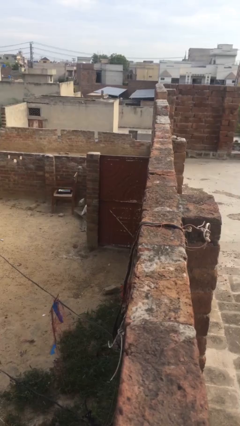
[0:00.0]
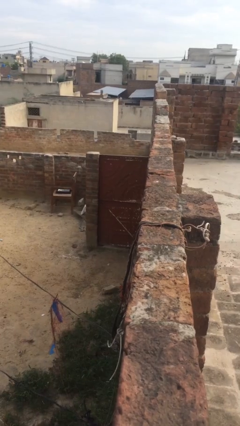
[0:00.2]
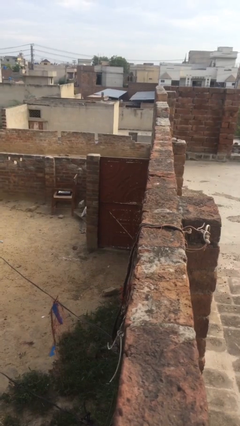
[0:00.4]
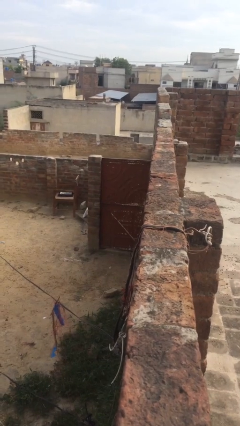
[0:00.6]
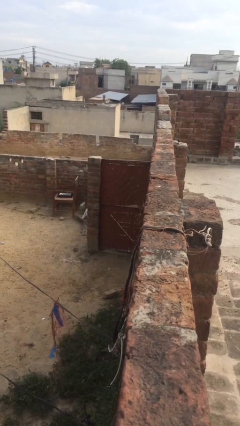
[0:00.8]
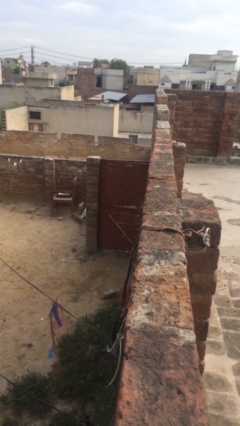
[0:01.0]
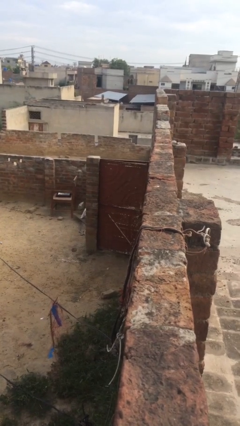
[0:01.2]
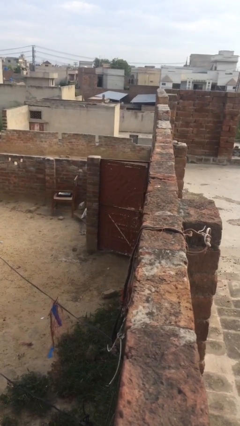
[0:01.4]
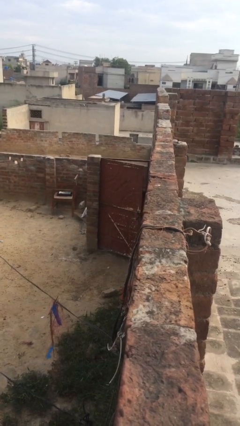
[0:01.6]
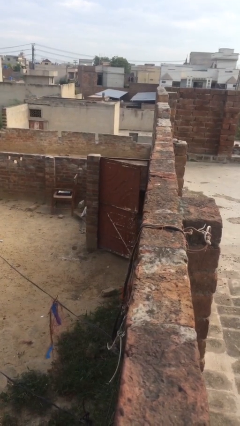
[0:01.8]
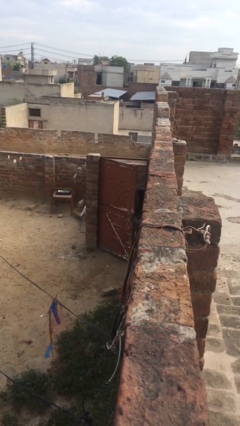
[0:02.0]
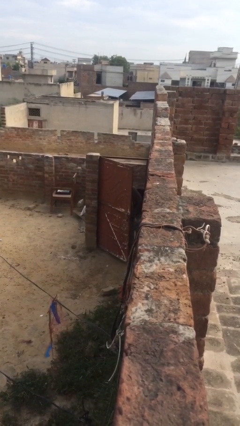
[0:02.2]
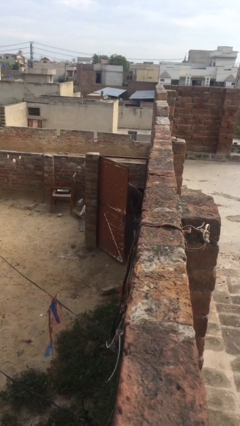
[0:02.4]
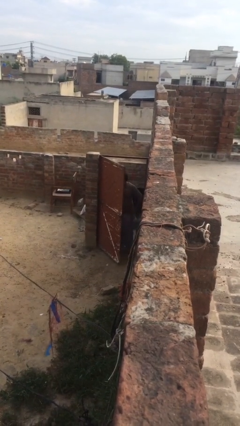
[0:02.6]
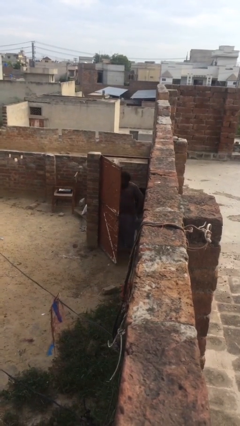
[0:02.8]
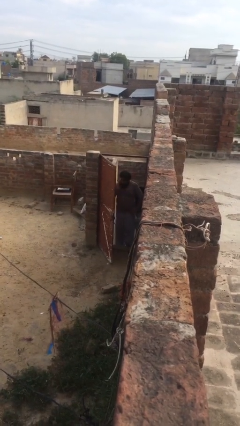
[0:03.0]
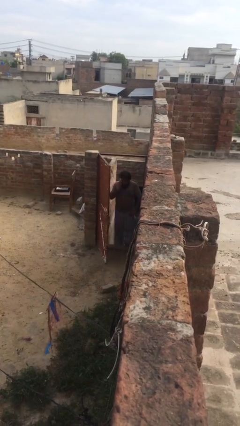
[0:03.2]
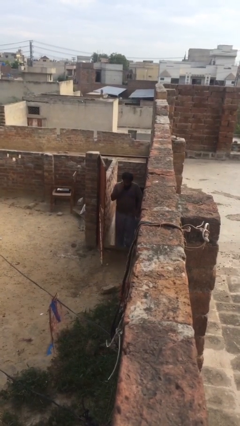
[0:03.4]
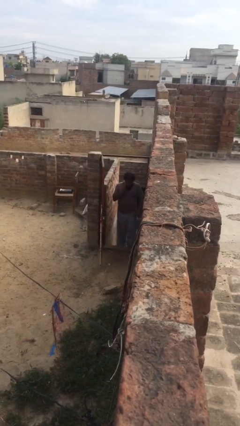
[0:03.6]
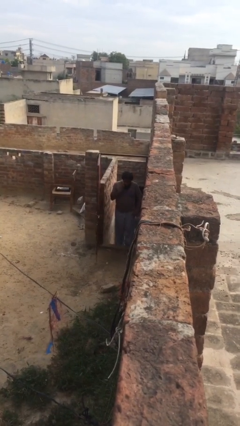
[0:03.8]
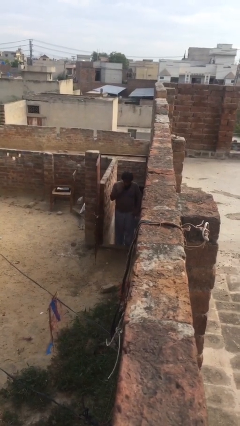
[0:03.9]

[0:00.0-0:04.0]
person opens facility door

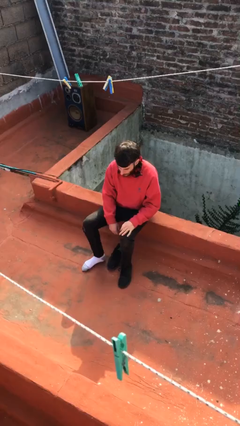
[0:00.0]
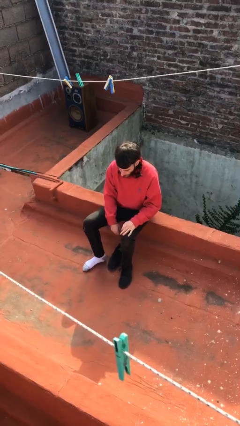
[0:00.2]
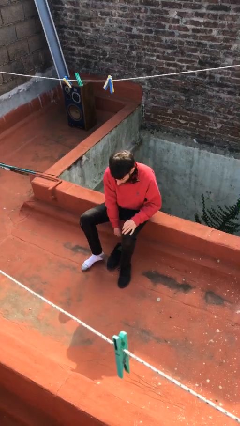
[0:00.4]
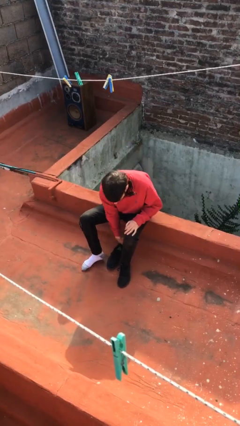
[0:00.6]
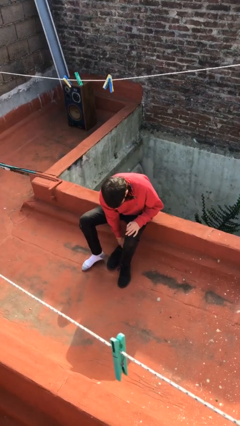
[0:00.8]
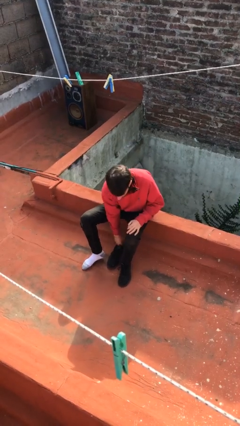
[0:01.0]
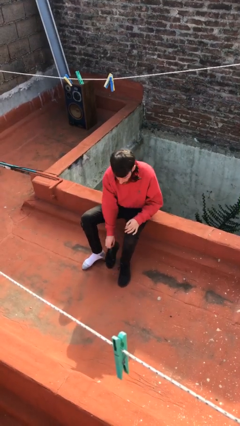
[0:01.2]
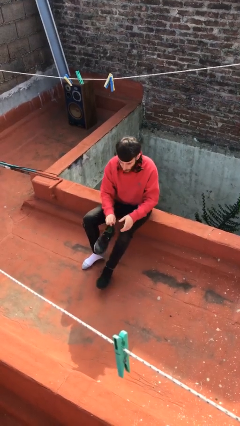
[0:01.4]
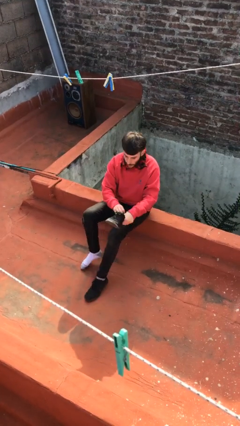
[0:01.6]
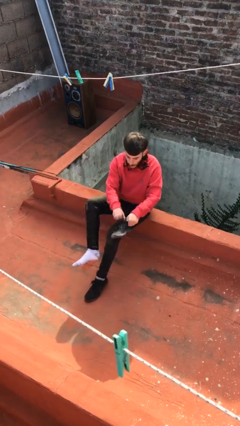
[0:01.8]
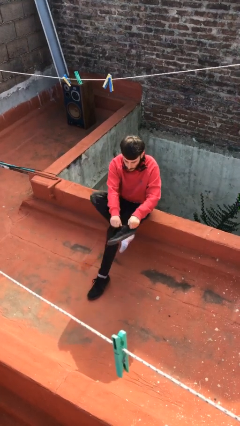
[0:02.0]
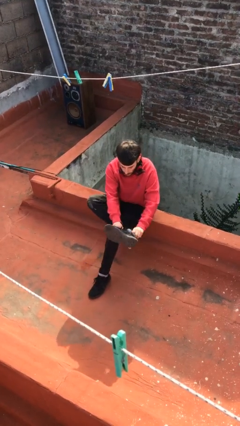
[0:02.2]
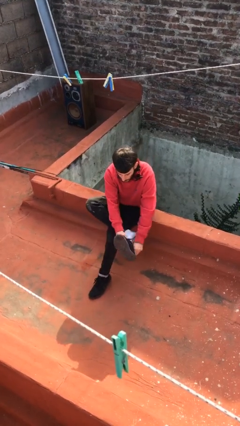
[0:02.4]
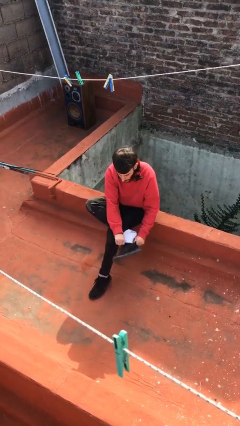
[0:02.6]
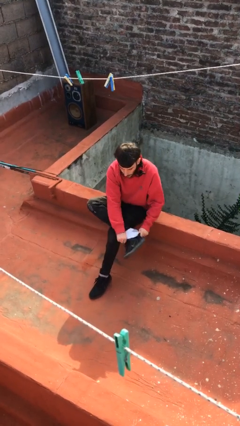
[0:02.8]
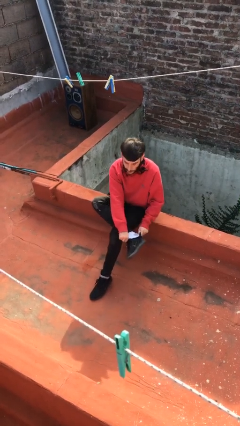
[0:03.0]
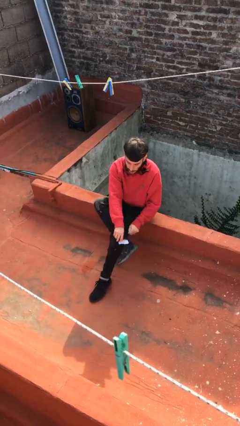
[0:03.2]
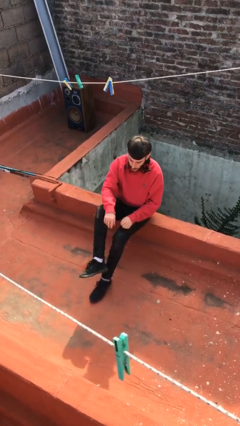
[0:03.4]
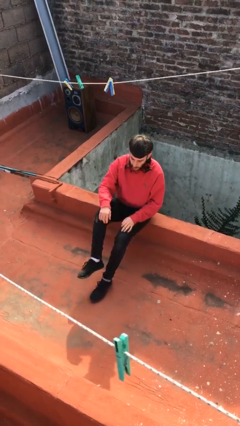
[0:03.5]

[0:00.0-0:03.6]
person puts on shoes

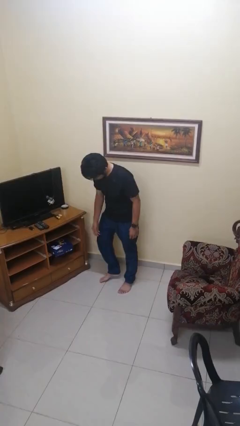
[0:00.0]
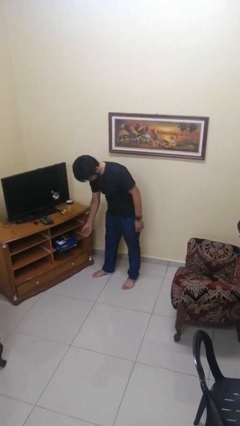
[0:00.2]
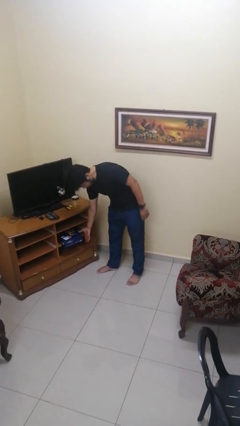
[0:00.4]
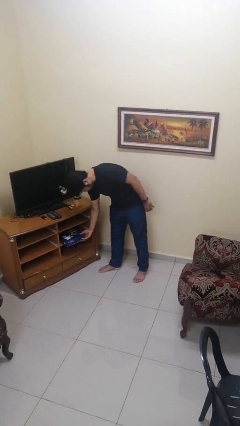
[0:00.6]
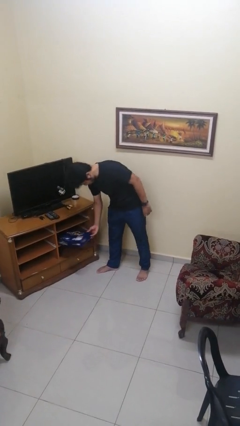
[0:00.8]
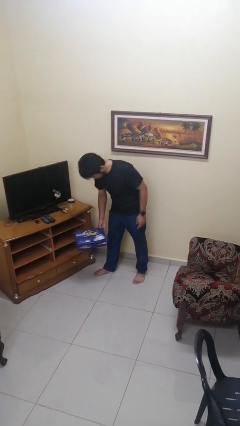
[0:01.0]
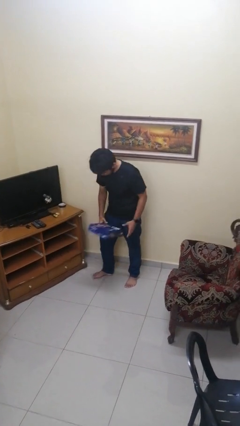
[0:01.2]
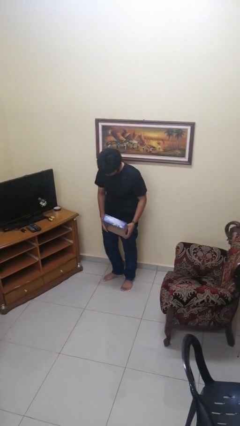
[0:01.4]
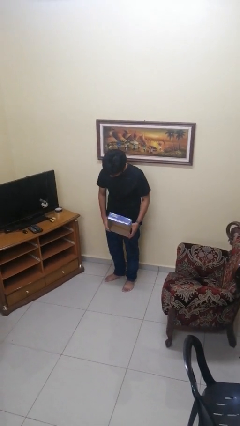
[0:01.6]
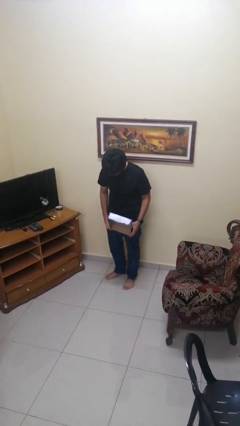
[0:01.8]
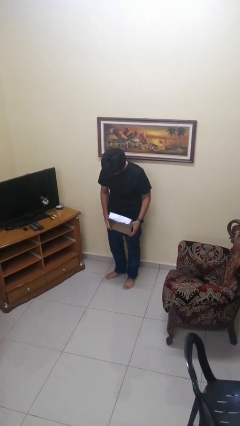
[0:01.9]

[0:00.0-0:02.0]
person picks up object from cabinet

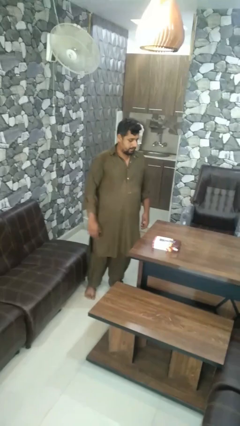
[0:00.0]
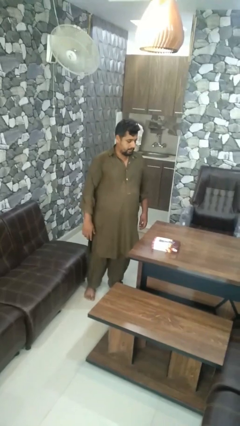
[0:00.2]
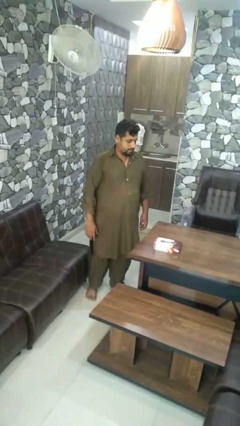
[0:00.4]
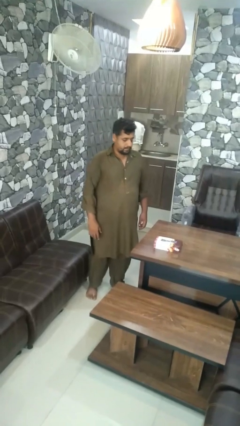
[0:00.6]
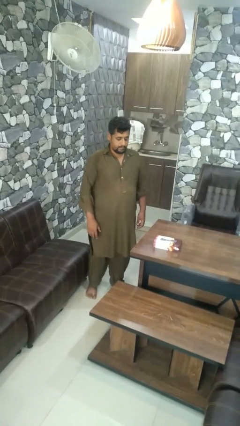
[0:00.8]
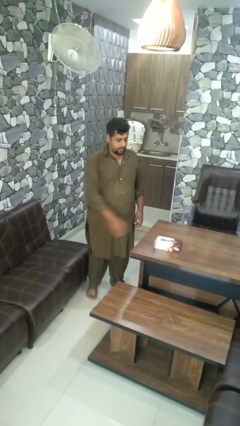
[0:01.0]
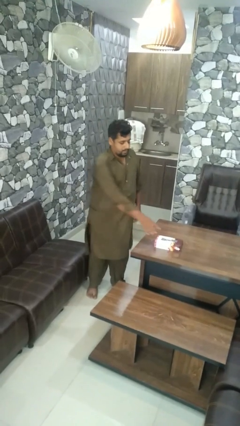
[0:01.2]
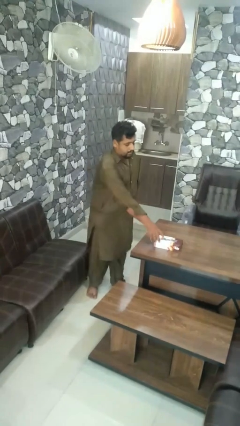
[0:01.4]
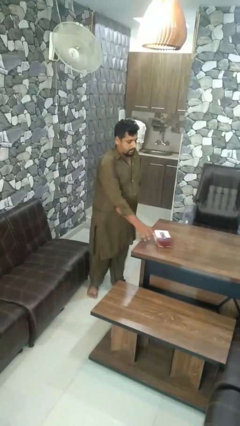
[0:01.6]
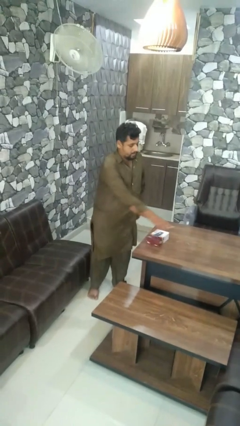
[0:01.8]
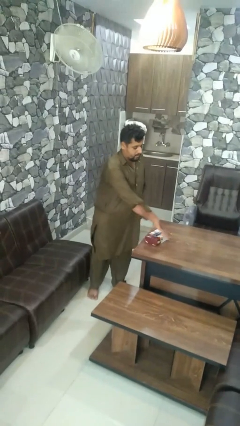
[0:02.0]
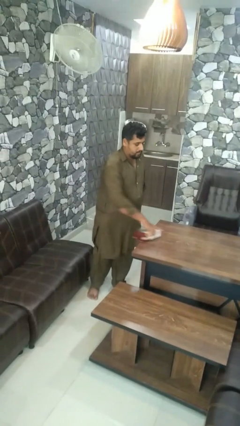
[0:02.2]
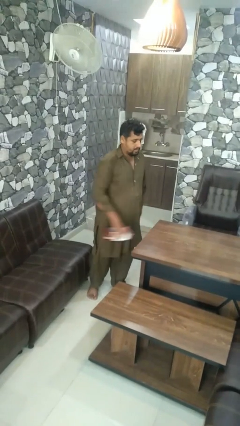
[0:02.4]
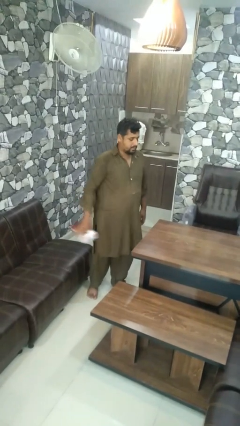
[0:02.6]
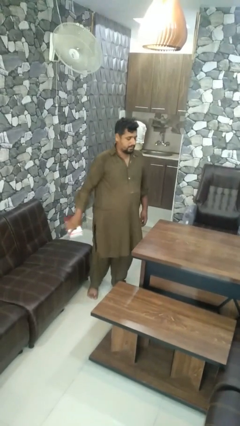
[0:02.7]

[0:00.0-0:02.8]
person picks up object from table

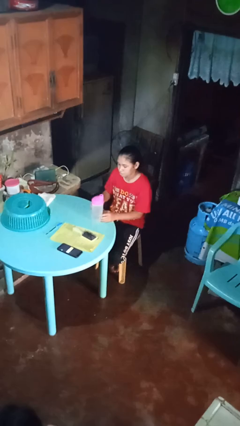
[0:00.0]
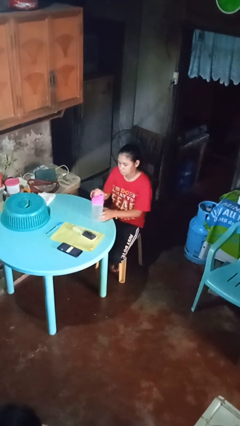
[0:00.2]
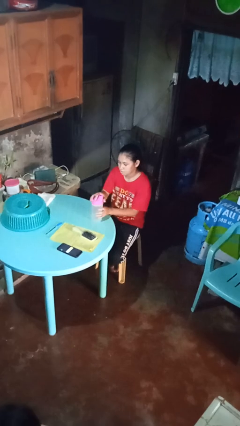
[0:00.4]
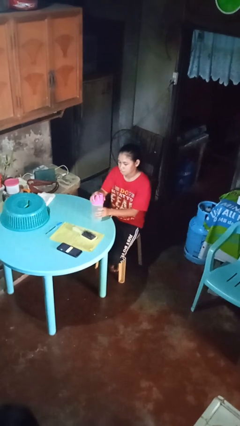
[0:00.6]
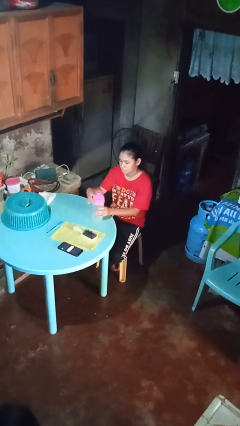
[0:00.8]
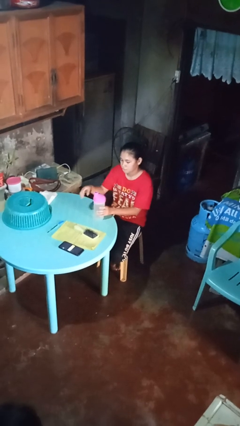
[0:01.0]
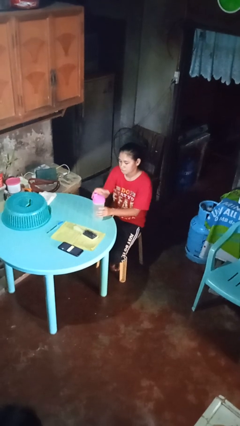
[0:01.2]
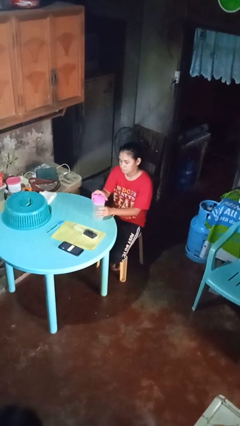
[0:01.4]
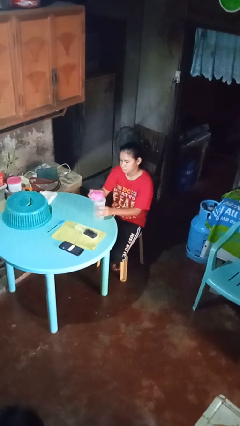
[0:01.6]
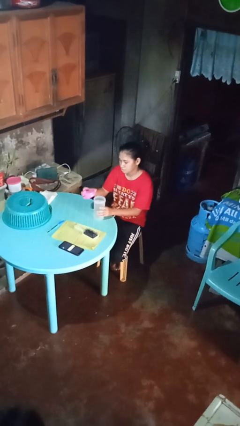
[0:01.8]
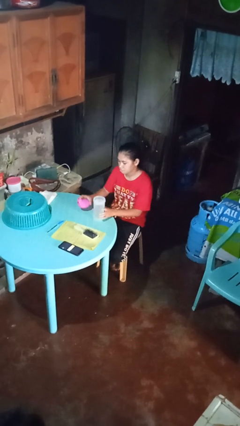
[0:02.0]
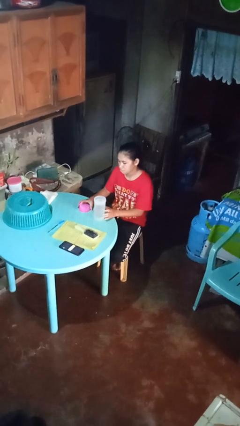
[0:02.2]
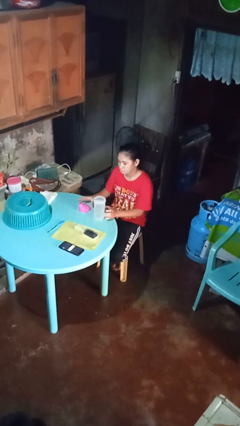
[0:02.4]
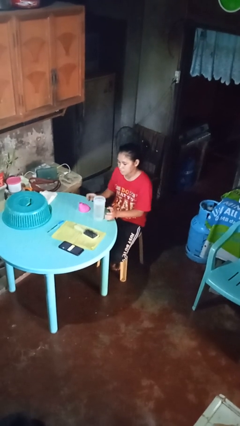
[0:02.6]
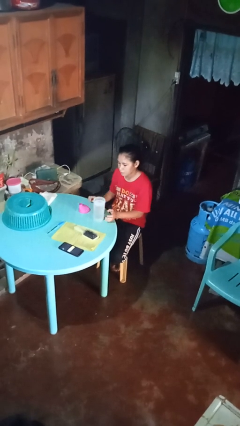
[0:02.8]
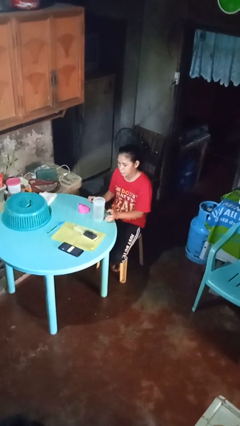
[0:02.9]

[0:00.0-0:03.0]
person unscrews lid from bottle

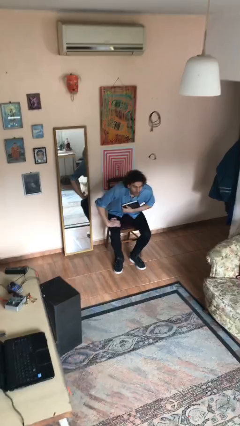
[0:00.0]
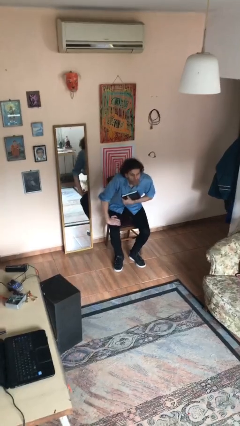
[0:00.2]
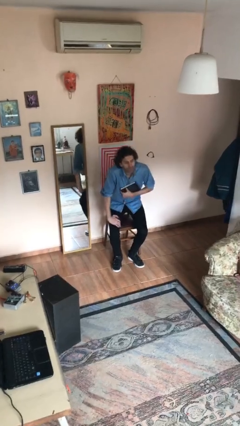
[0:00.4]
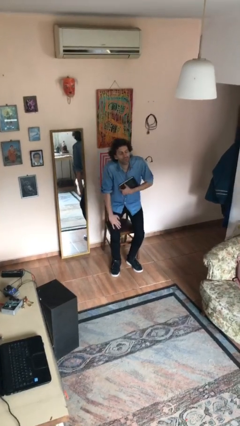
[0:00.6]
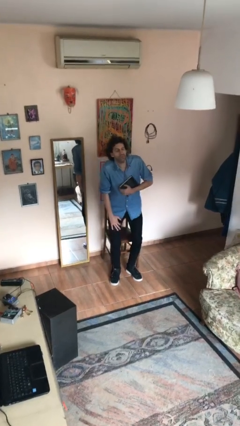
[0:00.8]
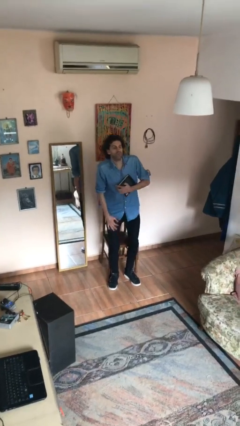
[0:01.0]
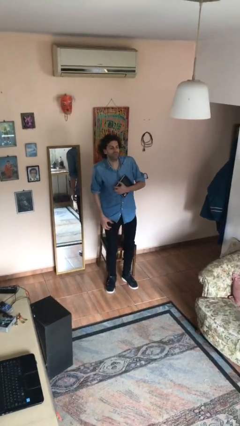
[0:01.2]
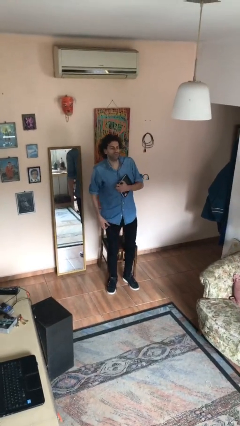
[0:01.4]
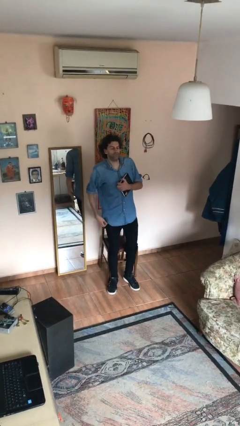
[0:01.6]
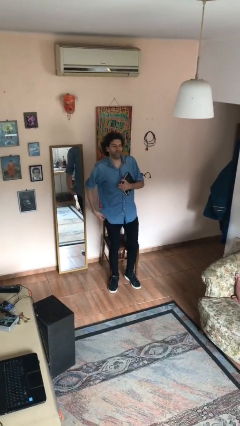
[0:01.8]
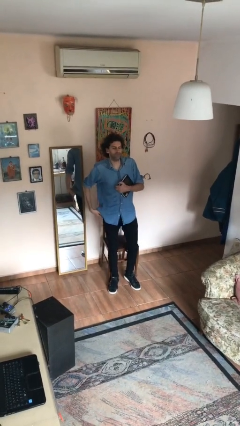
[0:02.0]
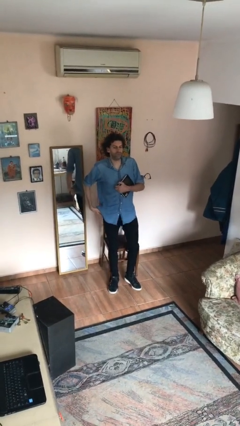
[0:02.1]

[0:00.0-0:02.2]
person stands up
